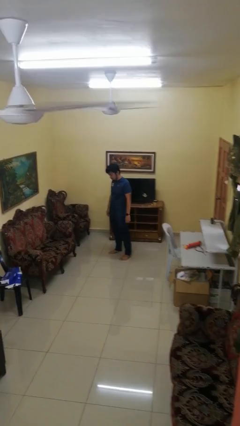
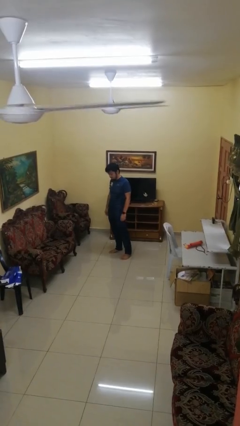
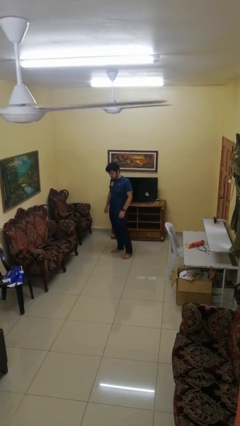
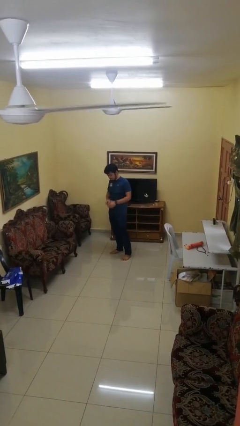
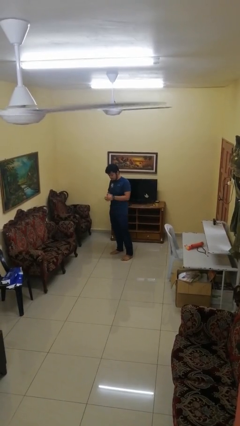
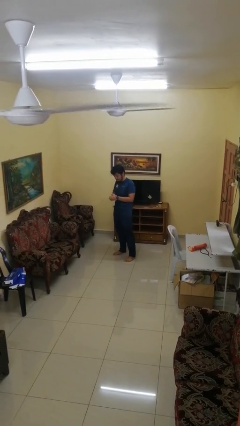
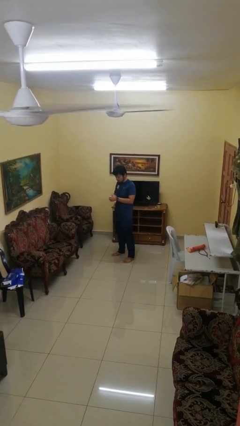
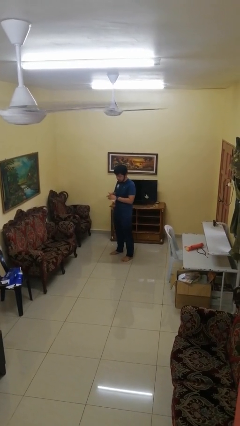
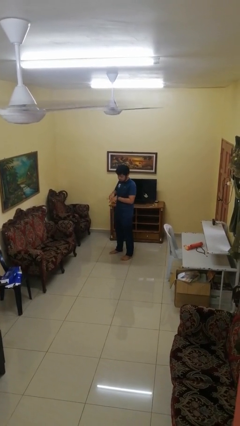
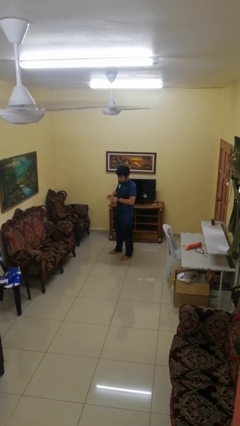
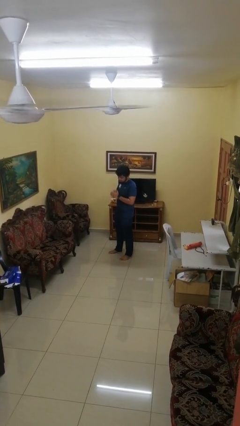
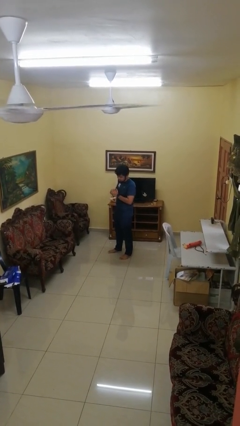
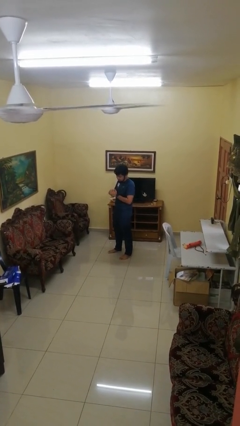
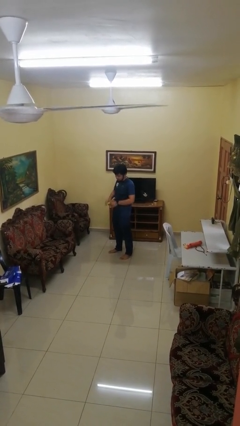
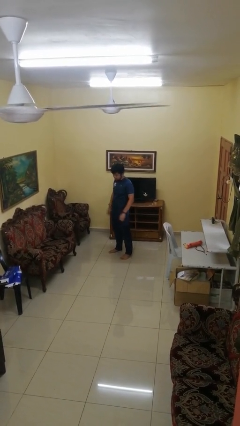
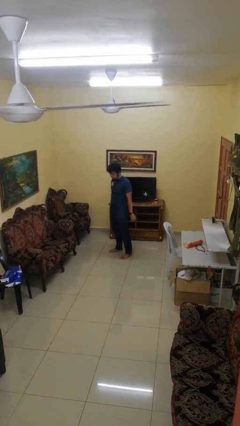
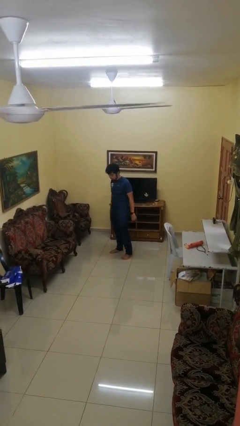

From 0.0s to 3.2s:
person cracks knuckles

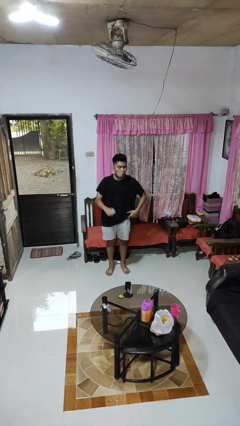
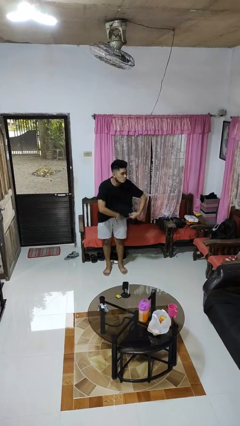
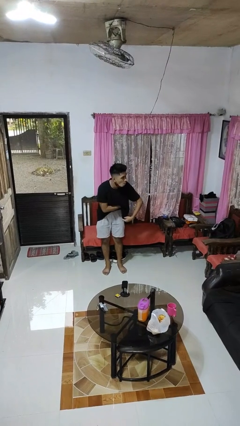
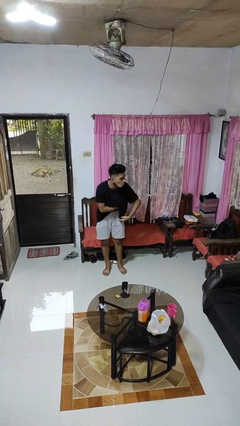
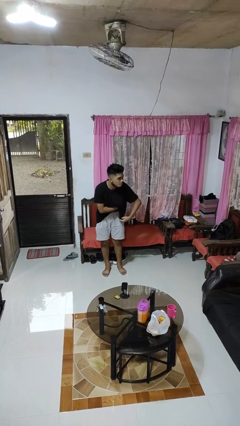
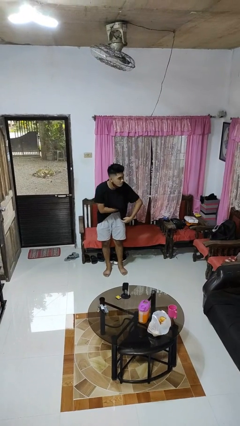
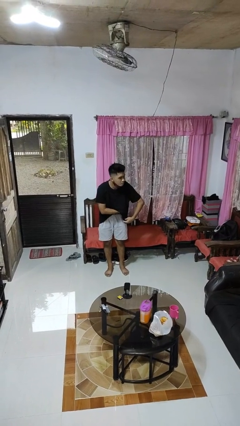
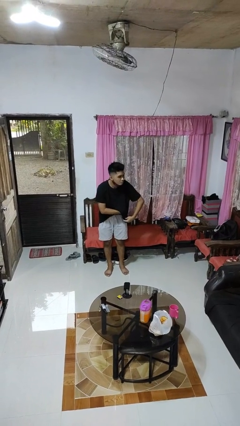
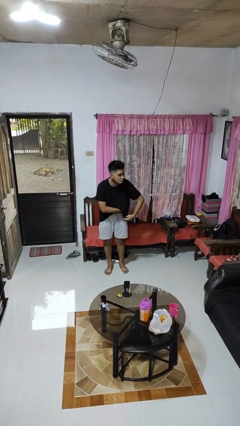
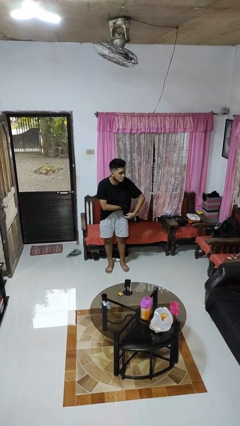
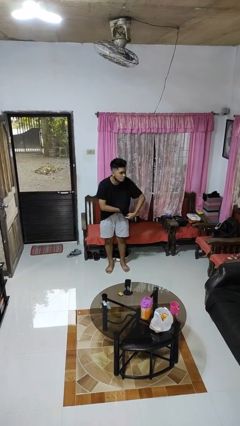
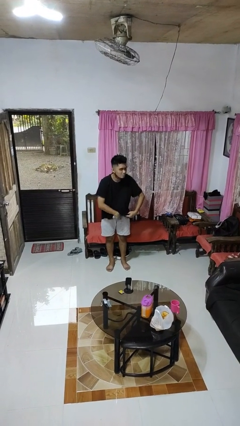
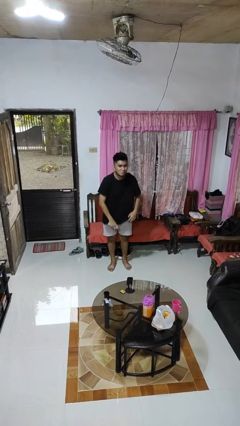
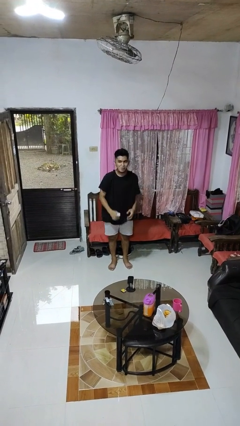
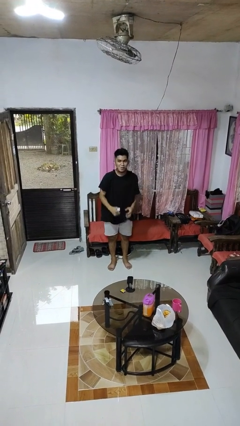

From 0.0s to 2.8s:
person applies deodorant

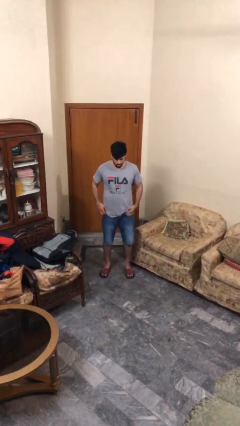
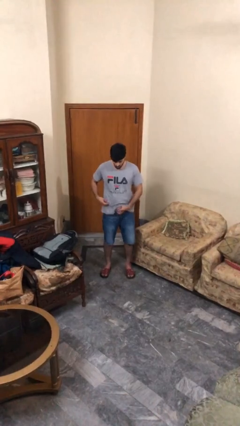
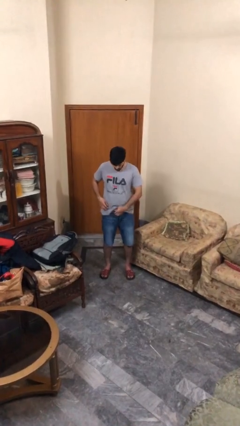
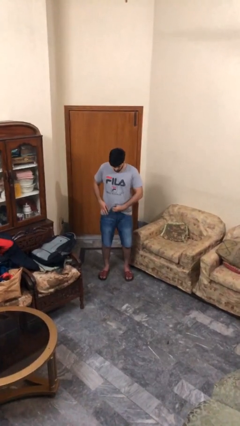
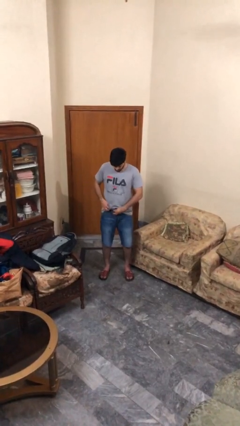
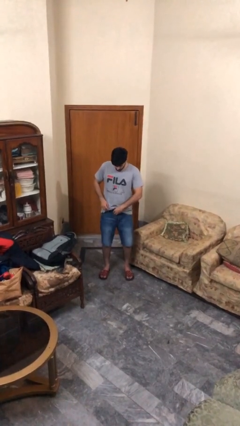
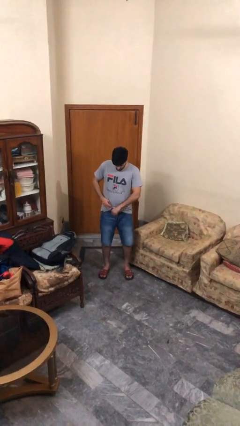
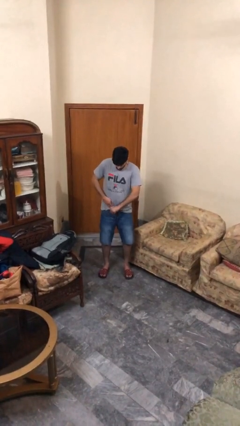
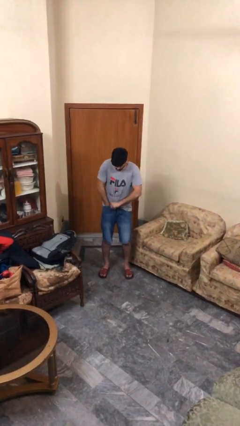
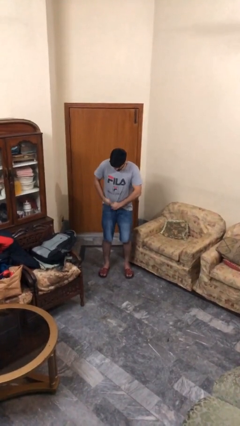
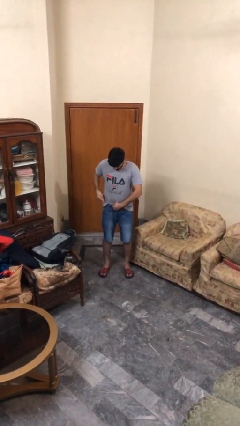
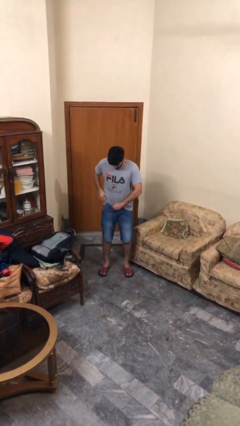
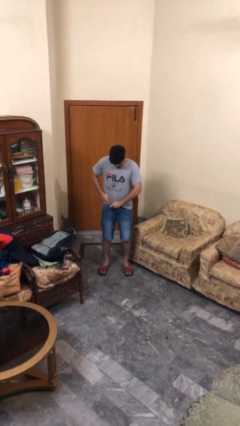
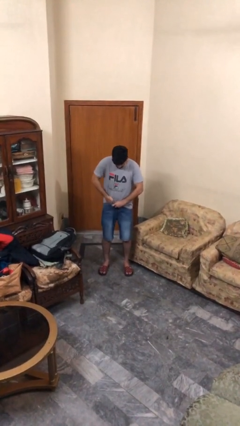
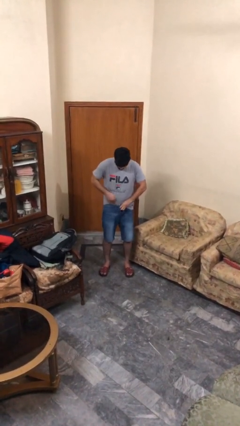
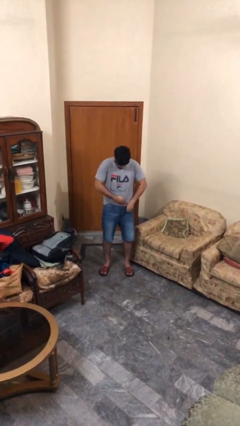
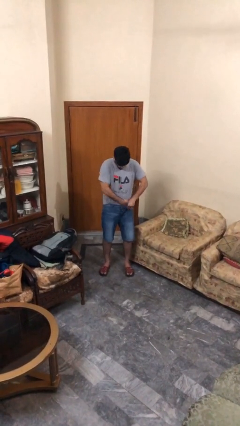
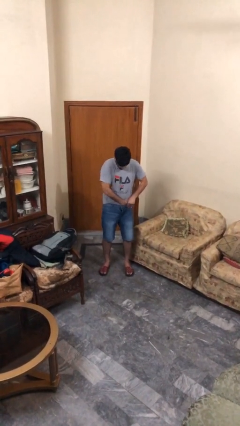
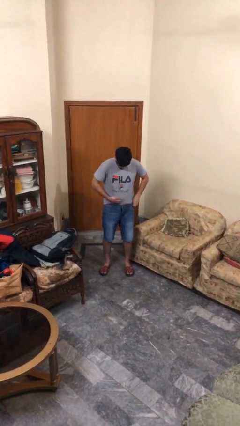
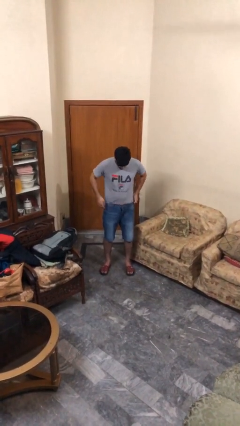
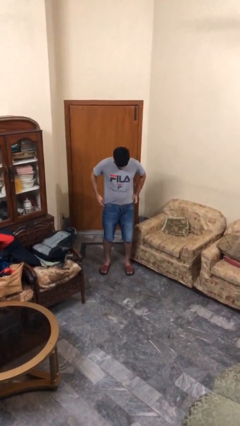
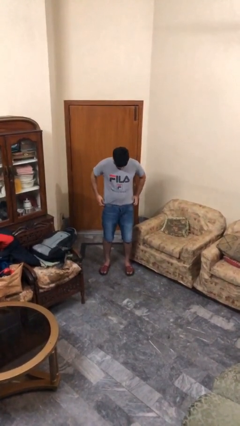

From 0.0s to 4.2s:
person tucks in shirt

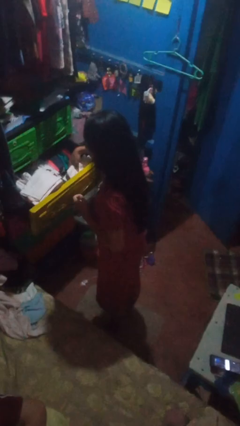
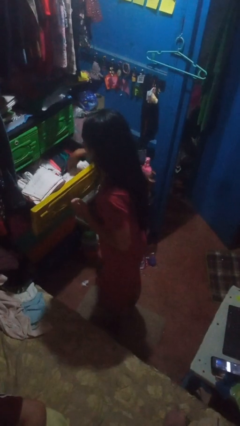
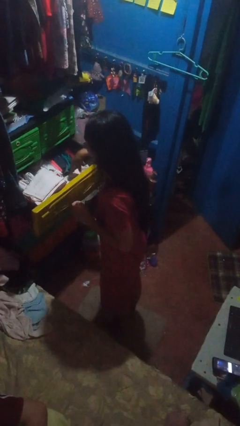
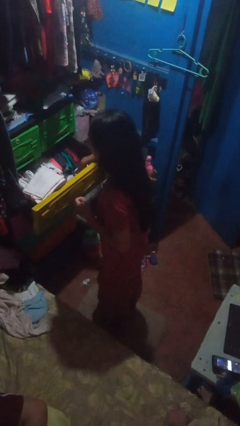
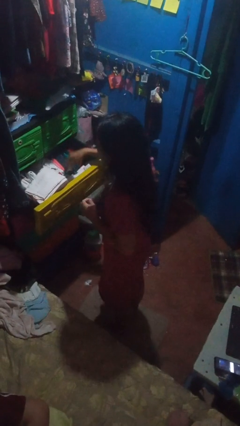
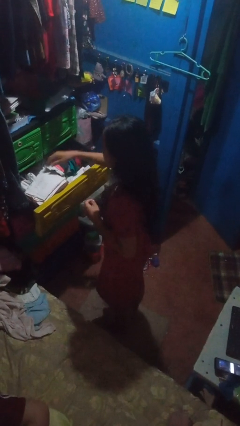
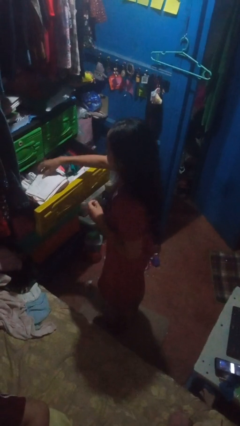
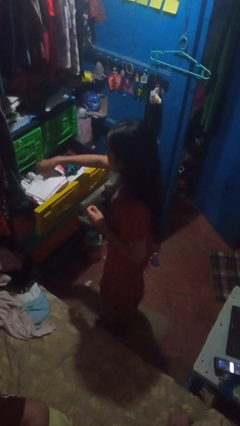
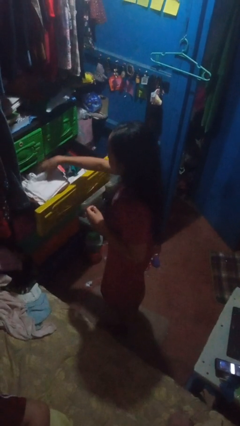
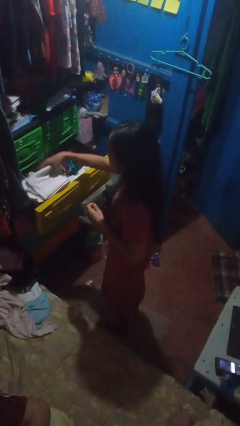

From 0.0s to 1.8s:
person puts clothes into dresser

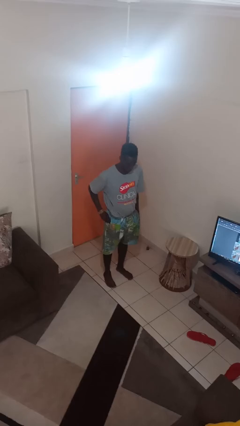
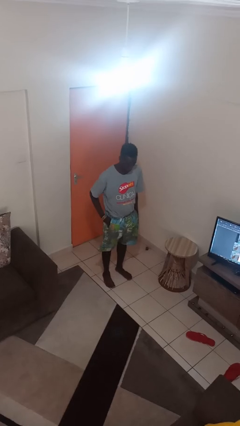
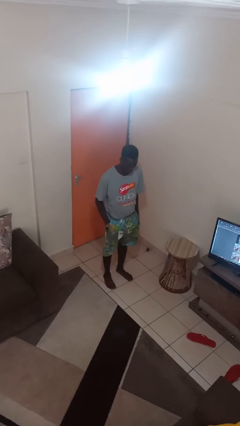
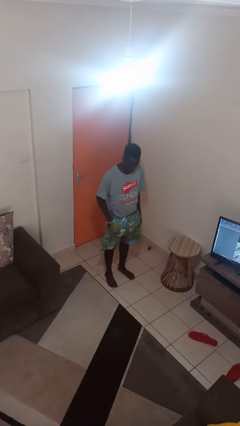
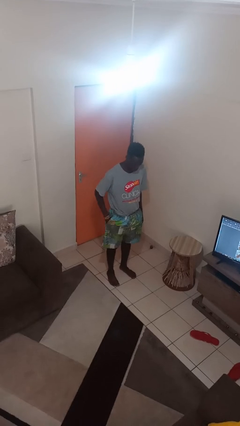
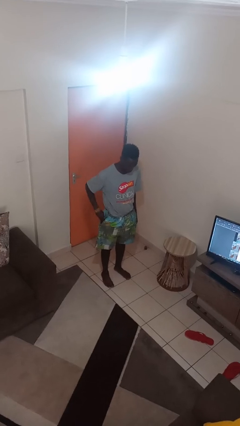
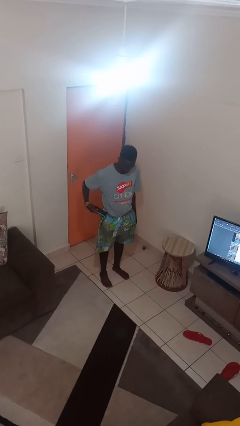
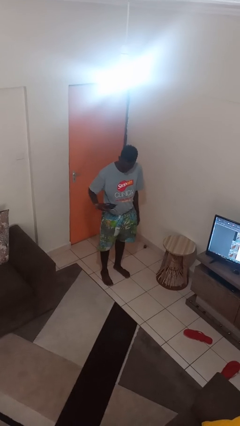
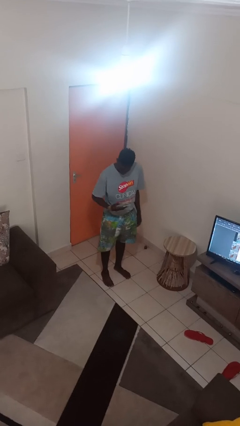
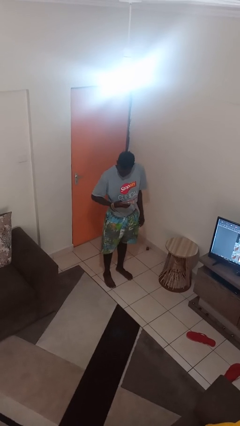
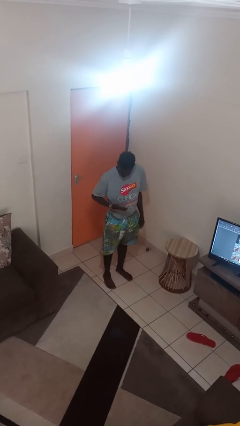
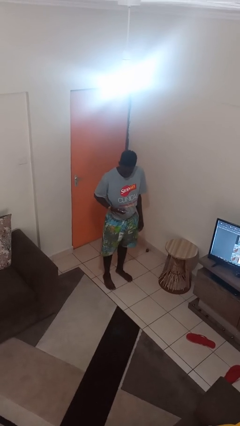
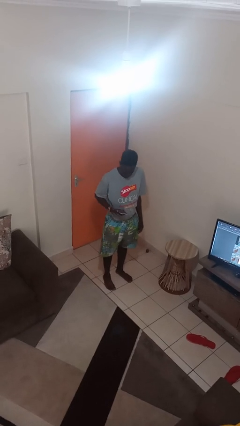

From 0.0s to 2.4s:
person takes phone from pocket

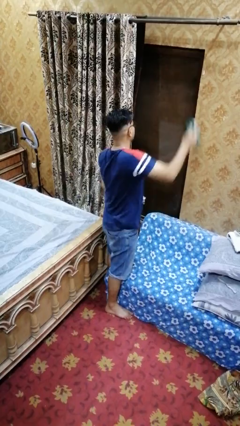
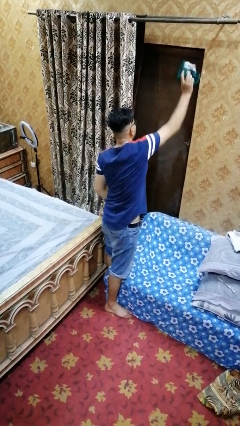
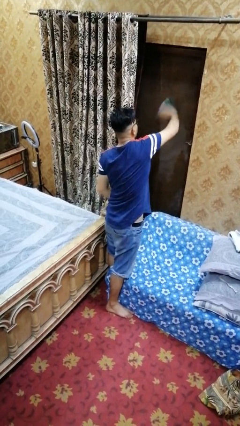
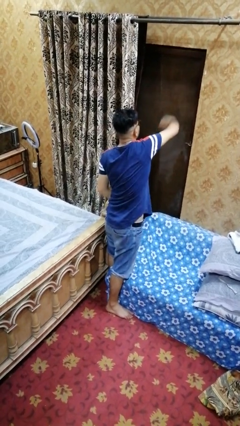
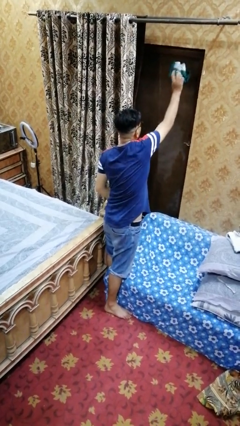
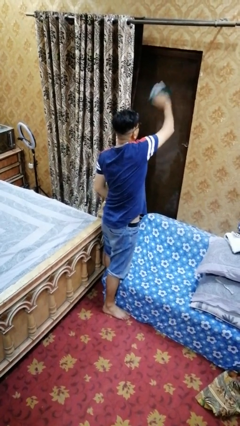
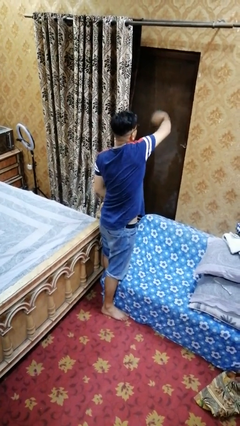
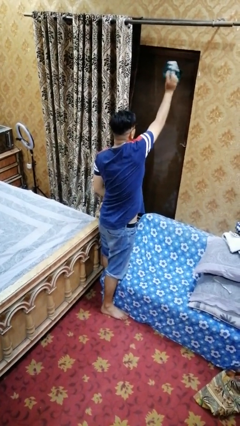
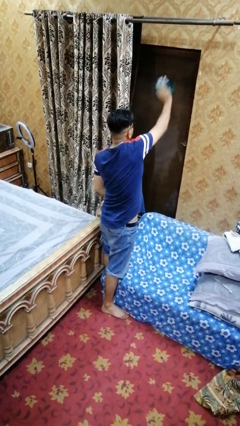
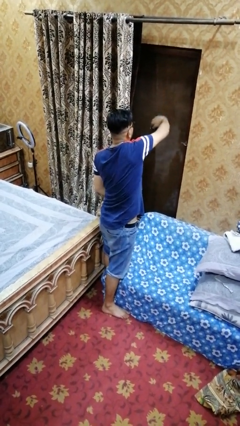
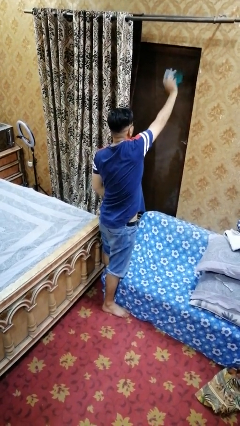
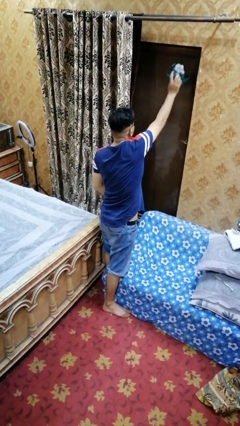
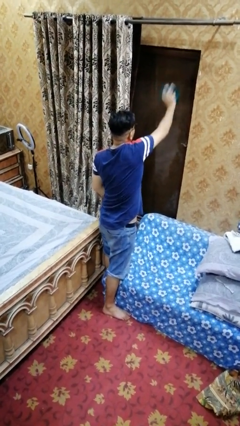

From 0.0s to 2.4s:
person washes window

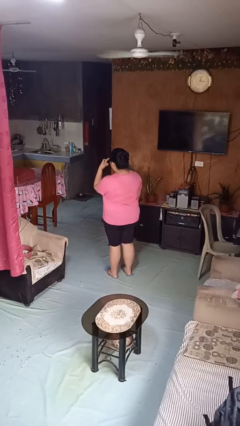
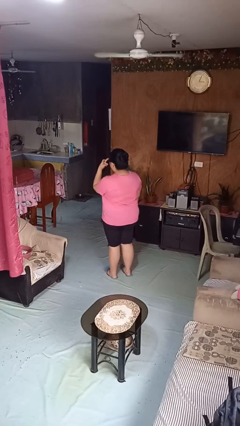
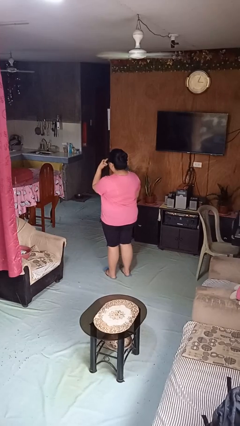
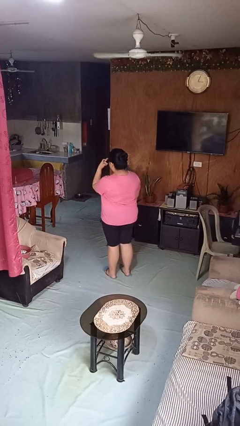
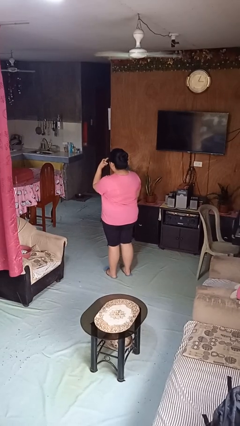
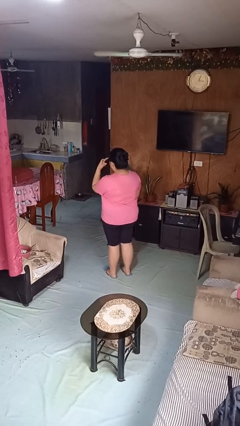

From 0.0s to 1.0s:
person gestures watch closely
